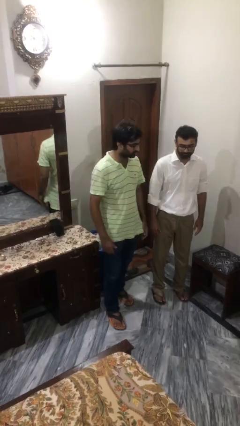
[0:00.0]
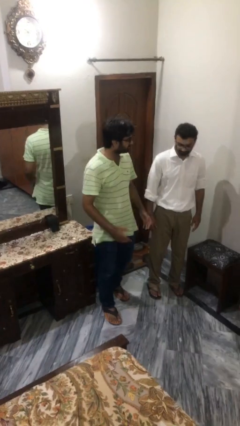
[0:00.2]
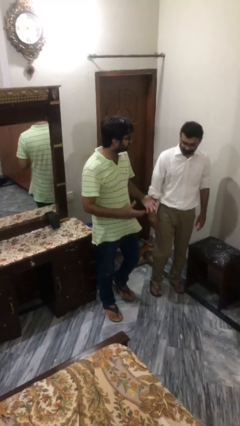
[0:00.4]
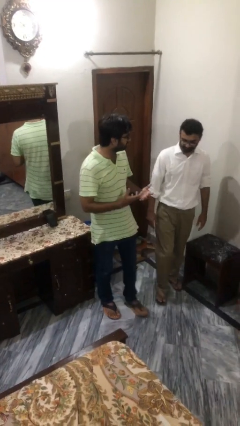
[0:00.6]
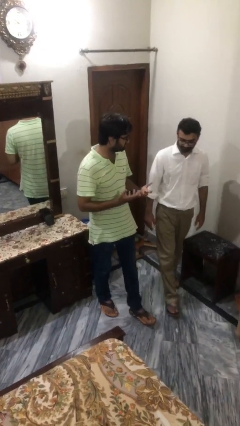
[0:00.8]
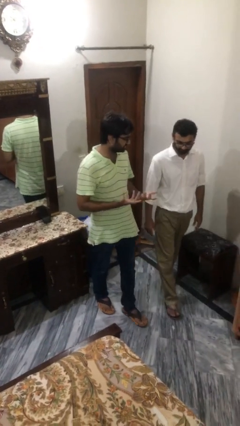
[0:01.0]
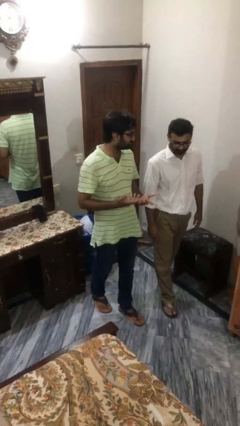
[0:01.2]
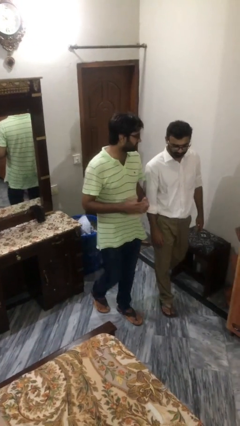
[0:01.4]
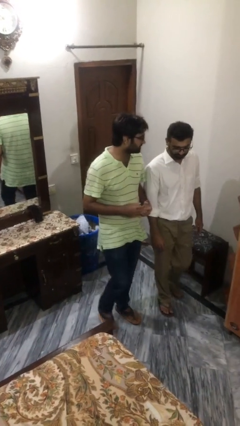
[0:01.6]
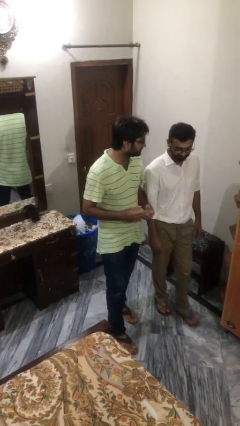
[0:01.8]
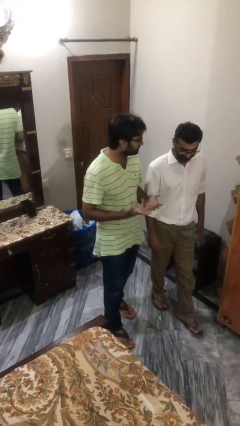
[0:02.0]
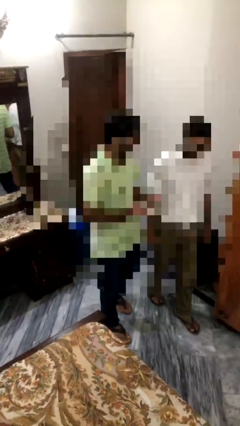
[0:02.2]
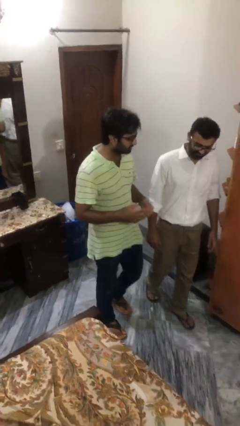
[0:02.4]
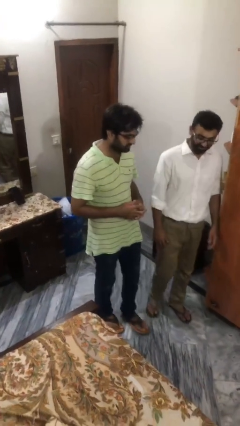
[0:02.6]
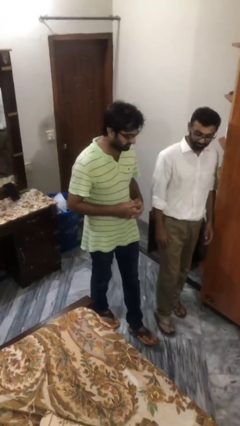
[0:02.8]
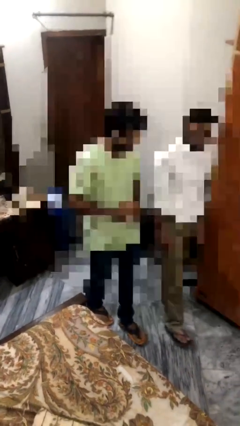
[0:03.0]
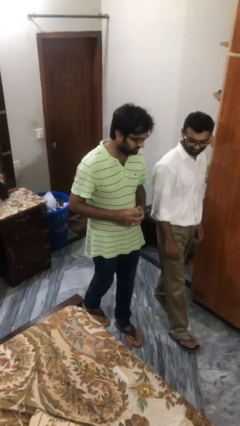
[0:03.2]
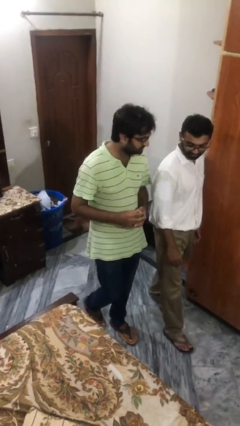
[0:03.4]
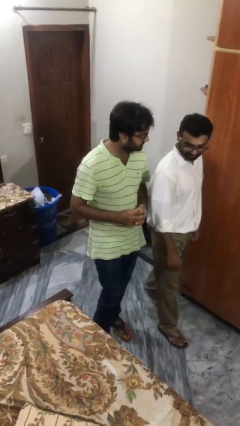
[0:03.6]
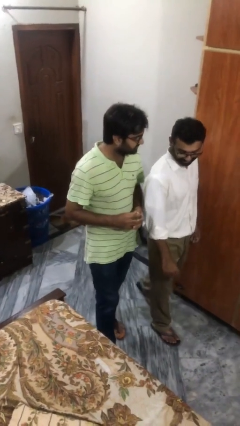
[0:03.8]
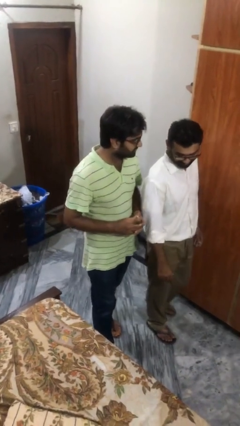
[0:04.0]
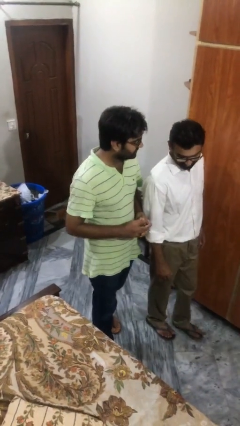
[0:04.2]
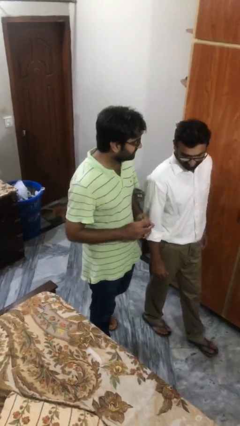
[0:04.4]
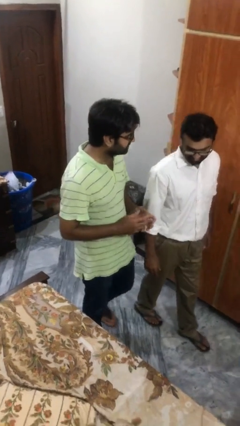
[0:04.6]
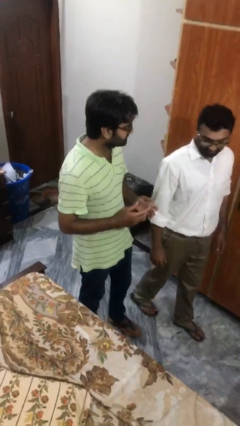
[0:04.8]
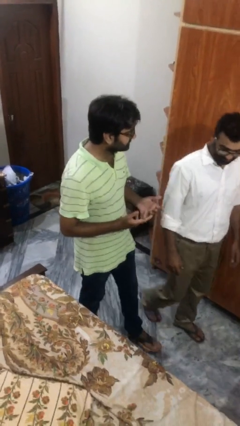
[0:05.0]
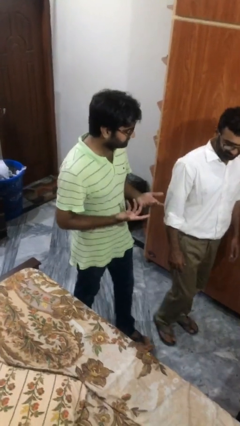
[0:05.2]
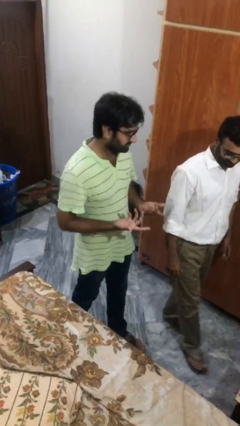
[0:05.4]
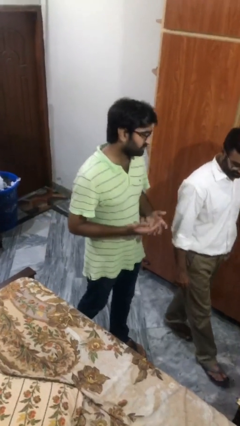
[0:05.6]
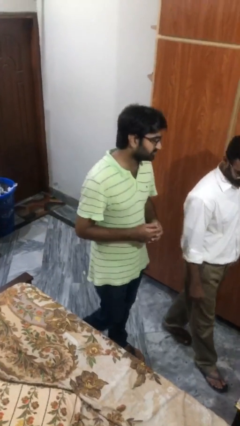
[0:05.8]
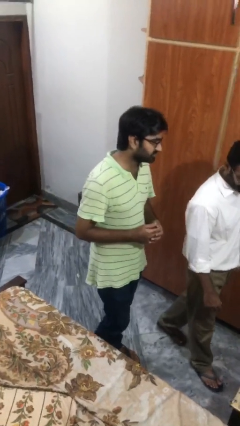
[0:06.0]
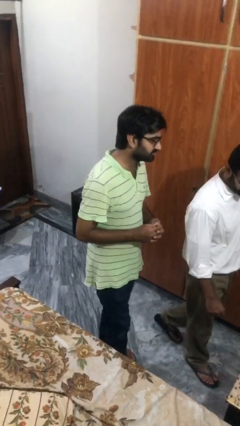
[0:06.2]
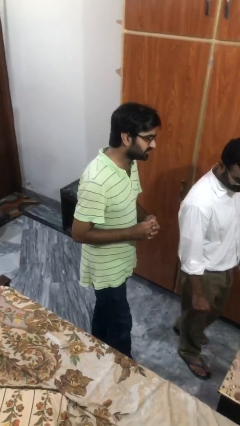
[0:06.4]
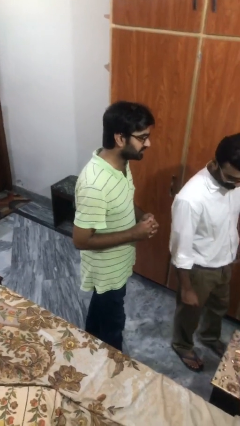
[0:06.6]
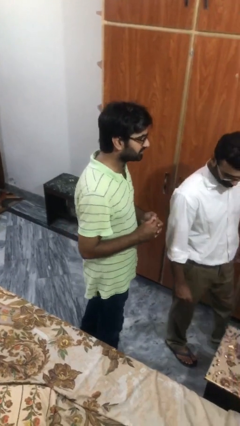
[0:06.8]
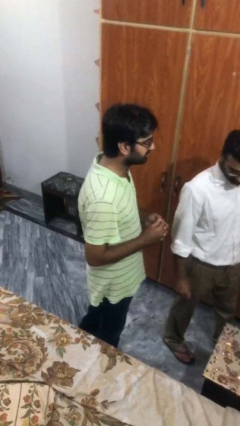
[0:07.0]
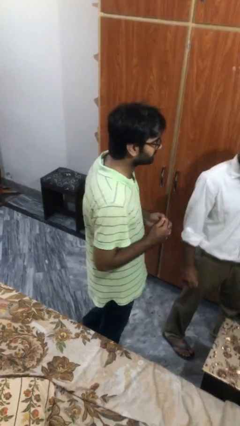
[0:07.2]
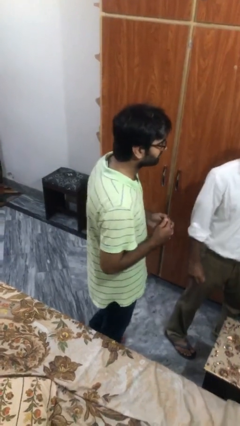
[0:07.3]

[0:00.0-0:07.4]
person talks to person

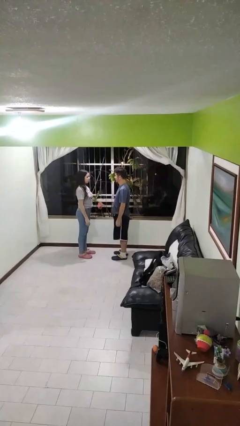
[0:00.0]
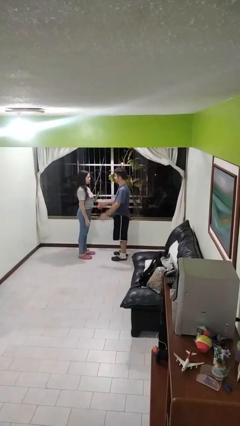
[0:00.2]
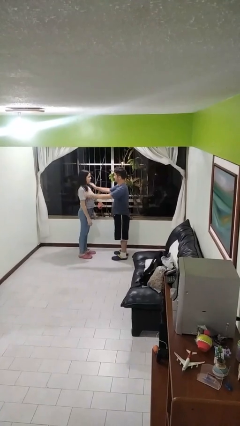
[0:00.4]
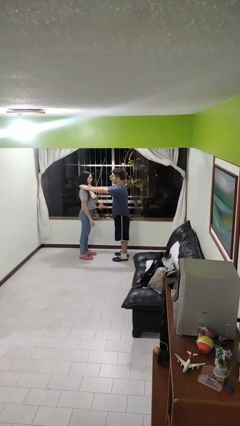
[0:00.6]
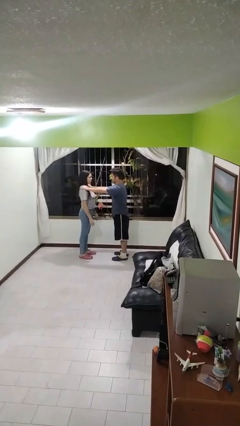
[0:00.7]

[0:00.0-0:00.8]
person grabs person by shoulder

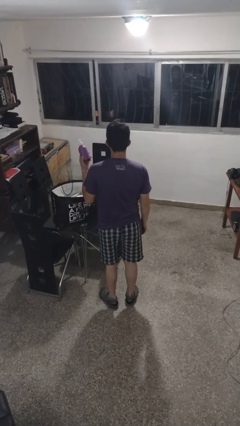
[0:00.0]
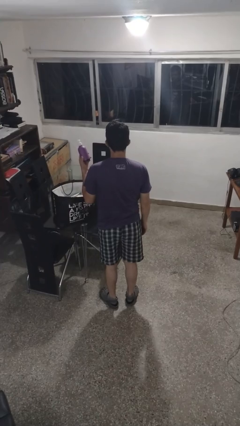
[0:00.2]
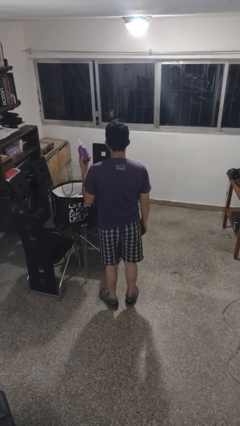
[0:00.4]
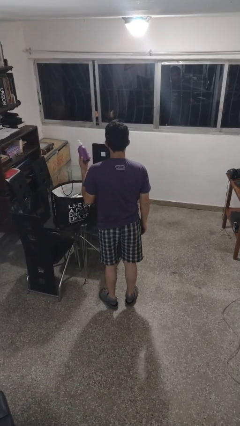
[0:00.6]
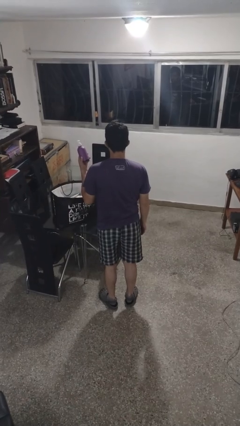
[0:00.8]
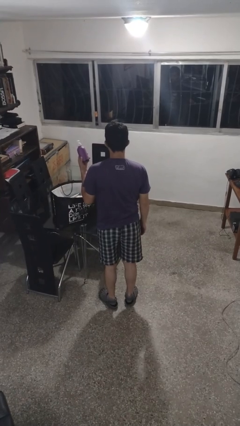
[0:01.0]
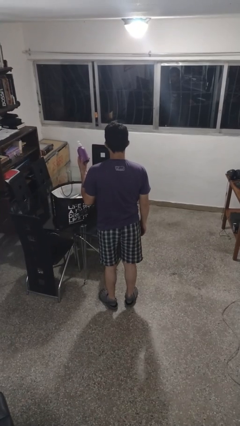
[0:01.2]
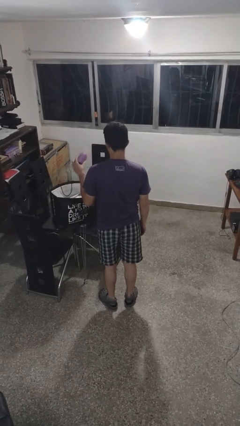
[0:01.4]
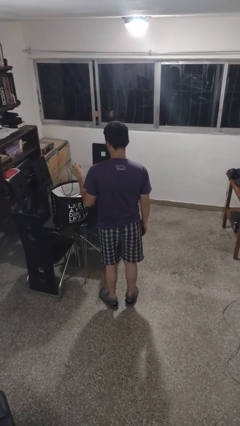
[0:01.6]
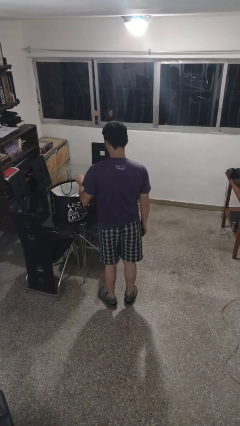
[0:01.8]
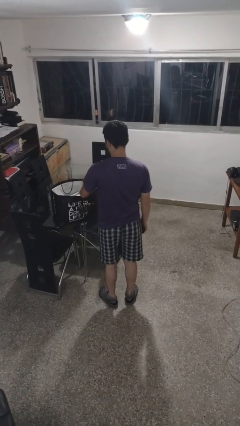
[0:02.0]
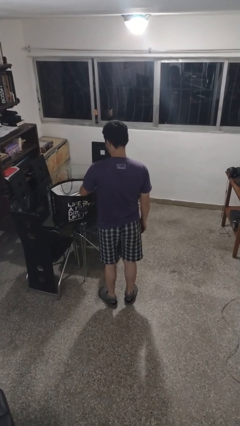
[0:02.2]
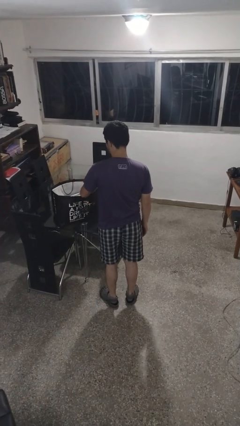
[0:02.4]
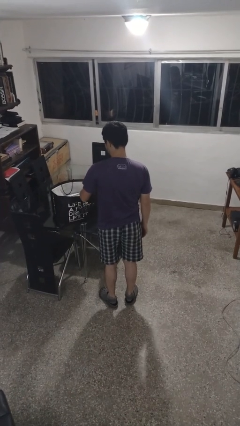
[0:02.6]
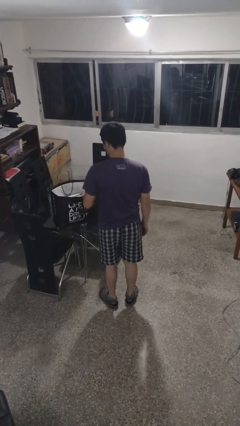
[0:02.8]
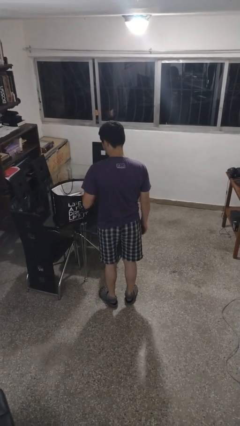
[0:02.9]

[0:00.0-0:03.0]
person puts object into bag

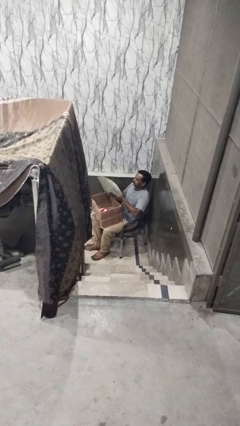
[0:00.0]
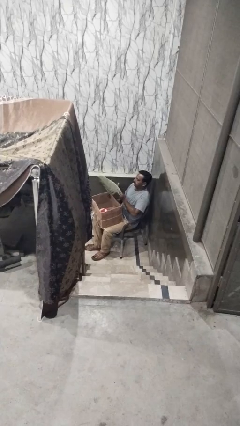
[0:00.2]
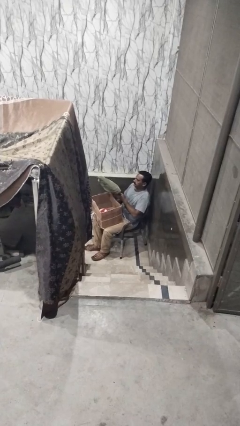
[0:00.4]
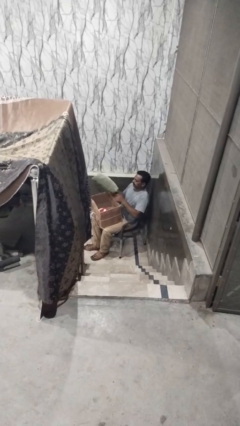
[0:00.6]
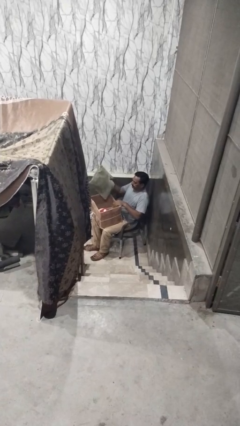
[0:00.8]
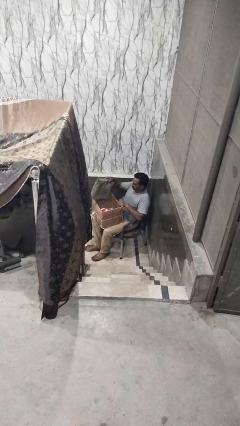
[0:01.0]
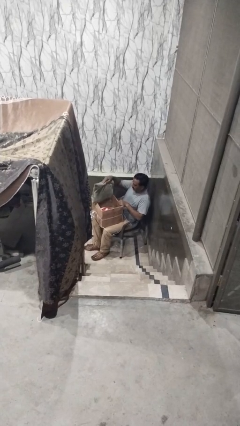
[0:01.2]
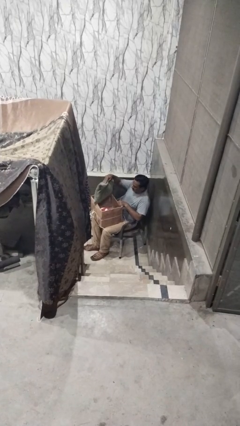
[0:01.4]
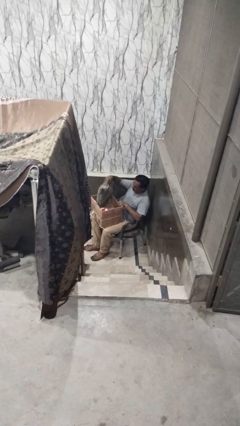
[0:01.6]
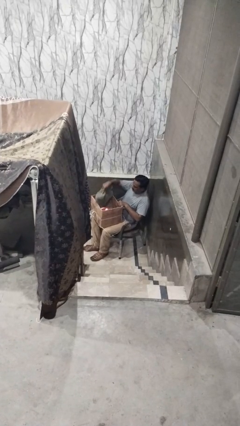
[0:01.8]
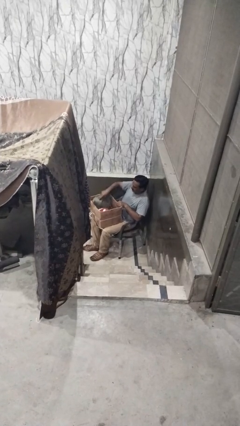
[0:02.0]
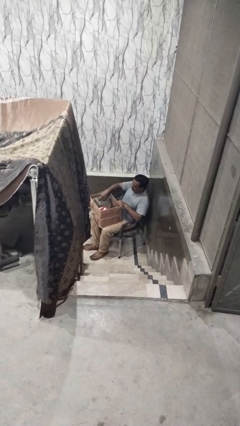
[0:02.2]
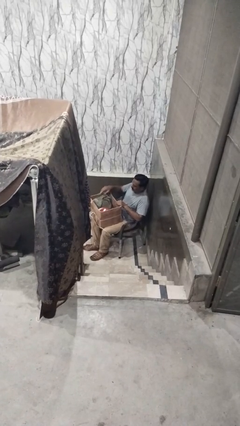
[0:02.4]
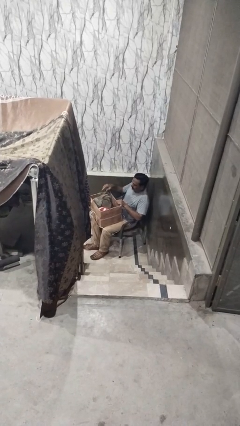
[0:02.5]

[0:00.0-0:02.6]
person puts object into box

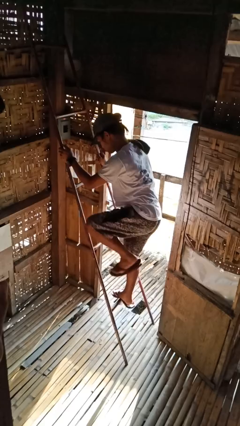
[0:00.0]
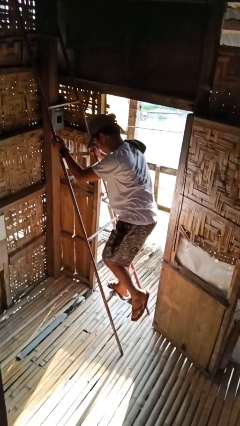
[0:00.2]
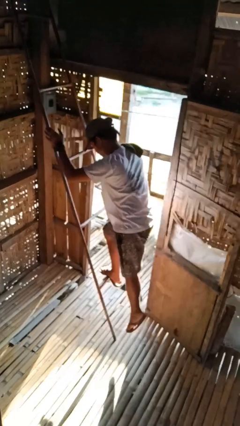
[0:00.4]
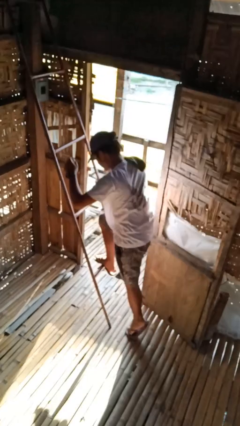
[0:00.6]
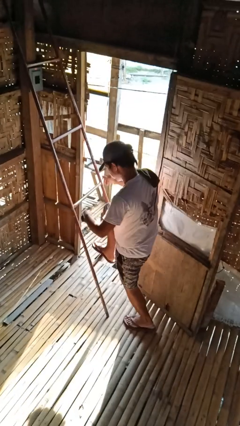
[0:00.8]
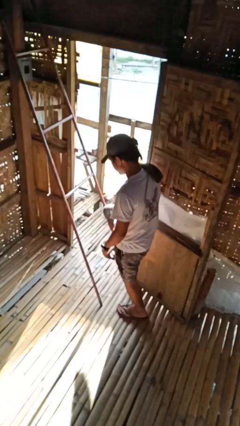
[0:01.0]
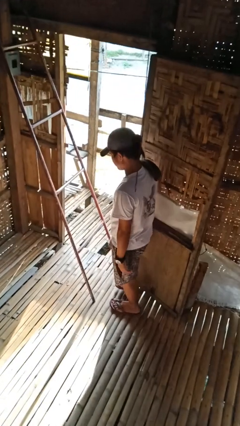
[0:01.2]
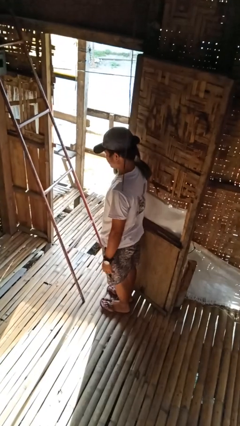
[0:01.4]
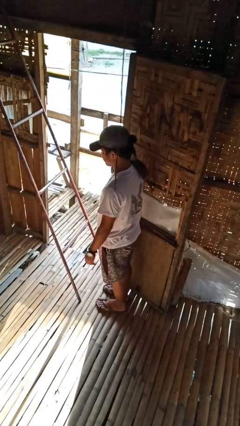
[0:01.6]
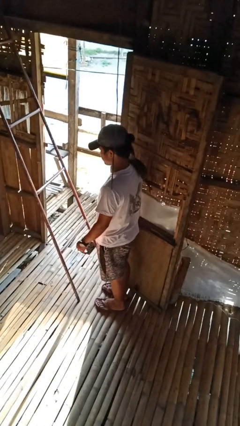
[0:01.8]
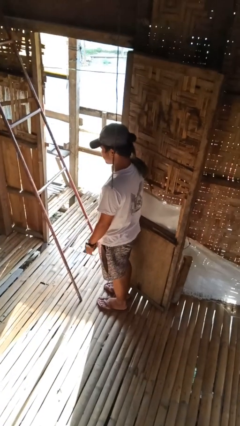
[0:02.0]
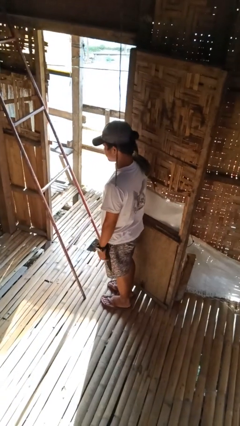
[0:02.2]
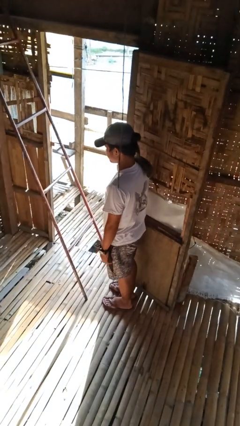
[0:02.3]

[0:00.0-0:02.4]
person climbs down ladder

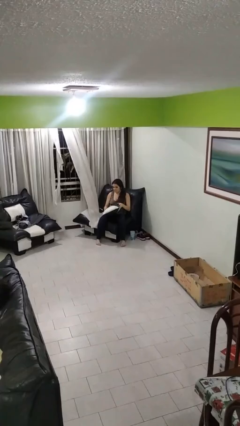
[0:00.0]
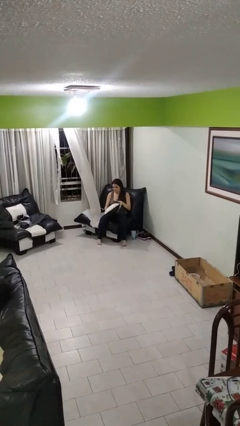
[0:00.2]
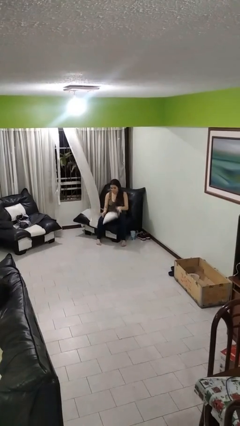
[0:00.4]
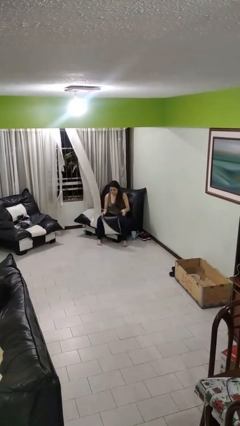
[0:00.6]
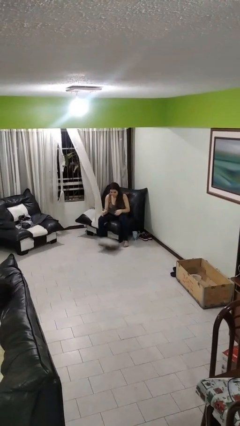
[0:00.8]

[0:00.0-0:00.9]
person drops object

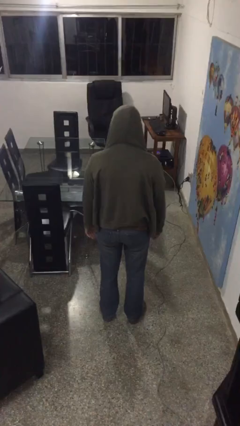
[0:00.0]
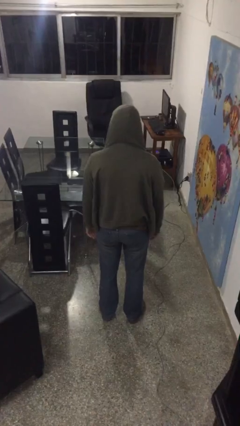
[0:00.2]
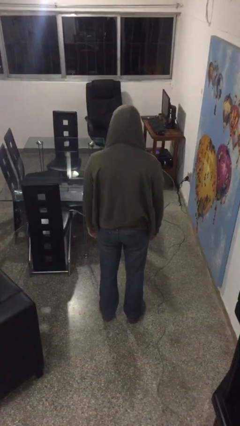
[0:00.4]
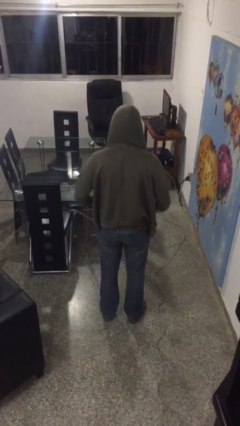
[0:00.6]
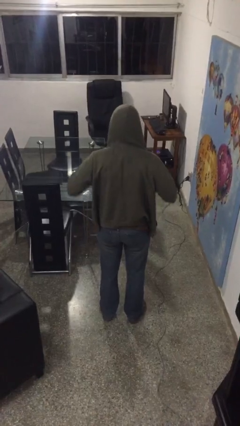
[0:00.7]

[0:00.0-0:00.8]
person takes off hoodie
